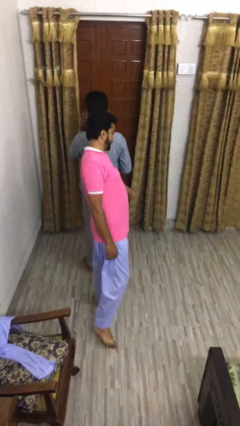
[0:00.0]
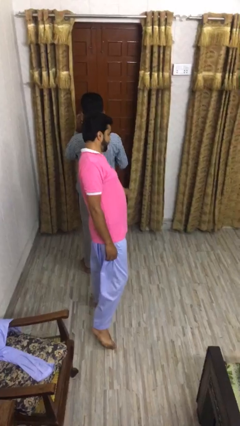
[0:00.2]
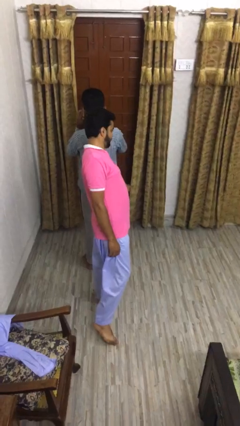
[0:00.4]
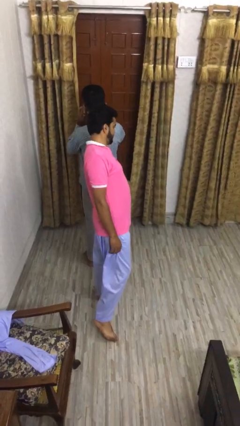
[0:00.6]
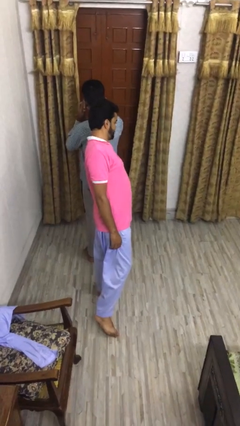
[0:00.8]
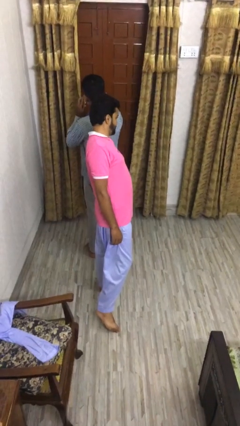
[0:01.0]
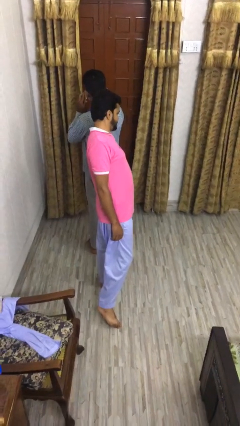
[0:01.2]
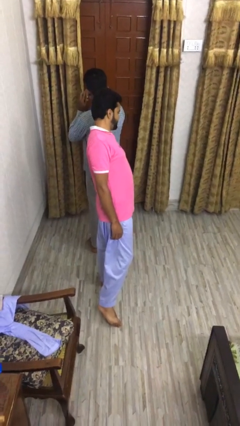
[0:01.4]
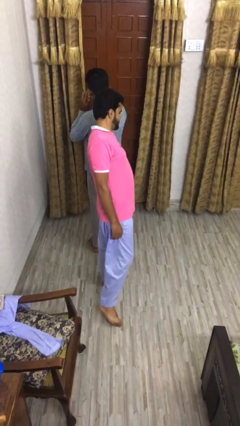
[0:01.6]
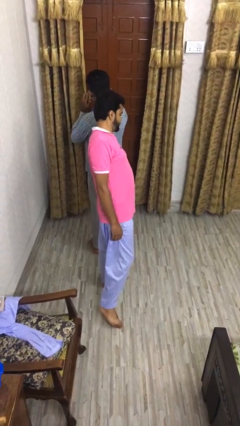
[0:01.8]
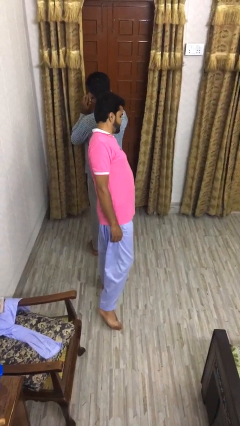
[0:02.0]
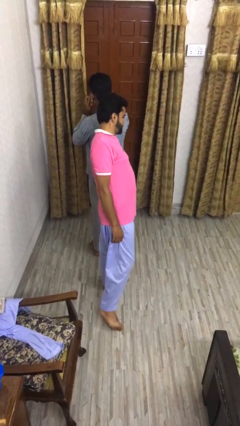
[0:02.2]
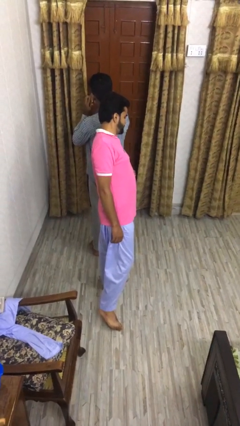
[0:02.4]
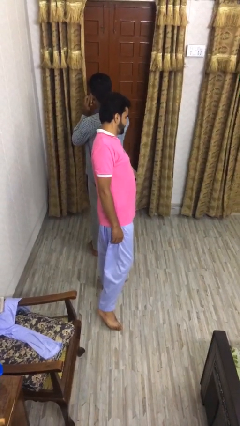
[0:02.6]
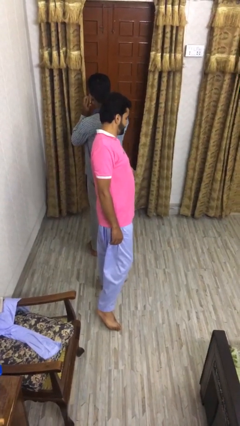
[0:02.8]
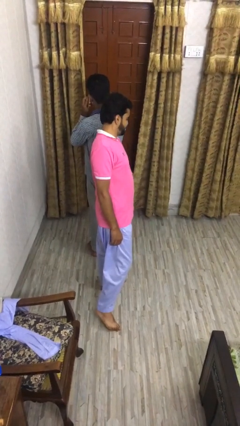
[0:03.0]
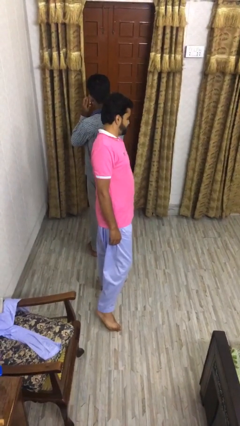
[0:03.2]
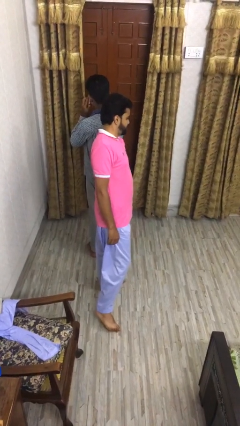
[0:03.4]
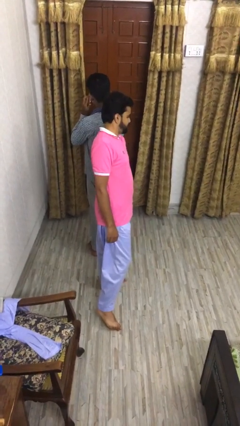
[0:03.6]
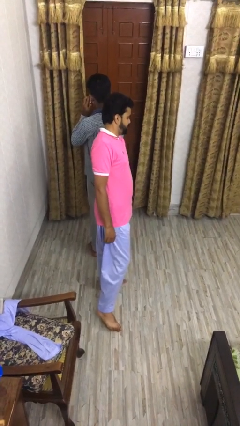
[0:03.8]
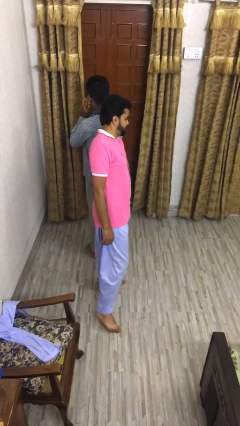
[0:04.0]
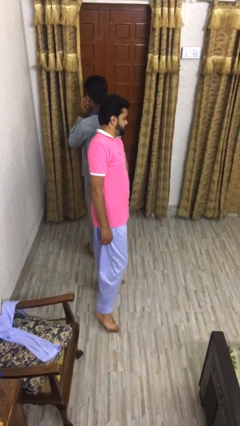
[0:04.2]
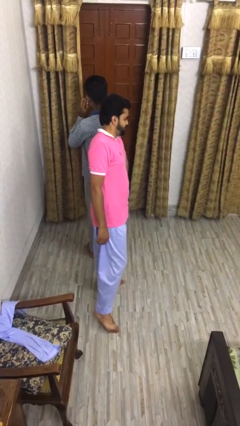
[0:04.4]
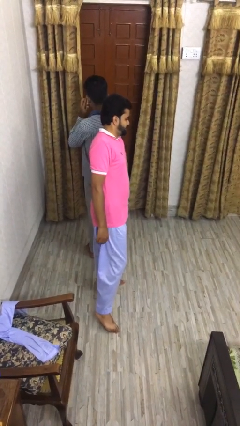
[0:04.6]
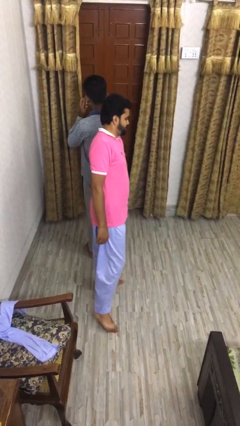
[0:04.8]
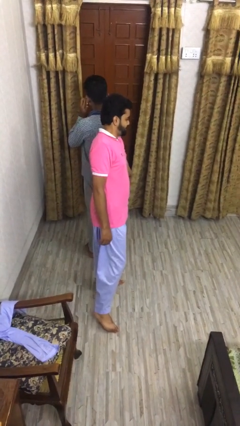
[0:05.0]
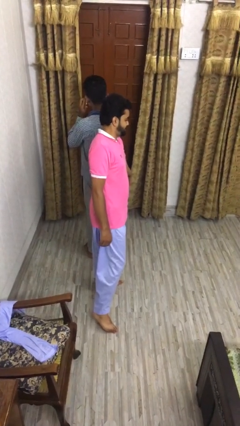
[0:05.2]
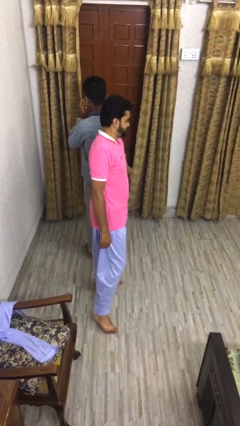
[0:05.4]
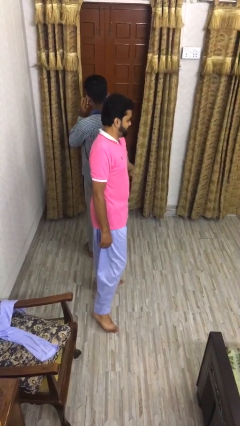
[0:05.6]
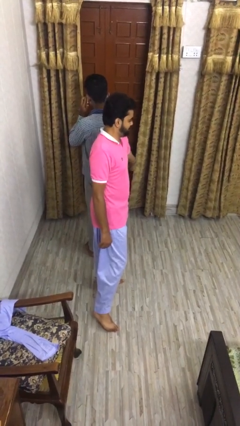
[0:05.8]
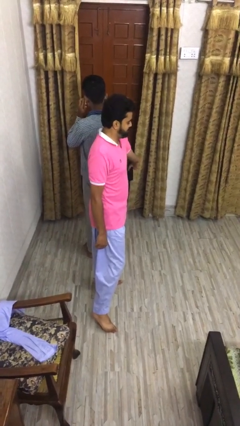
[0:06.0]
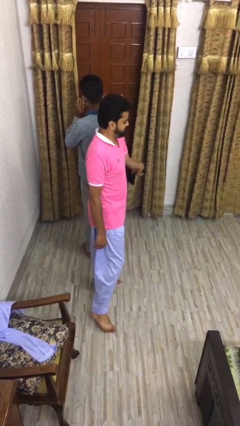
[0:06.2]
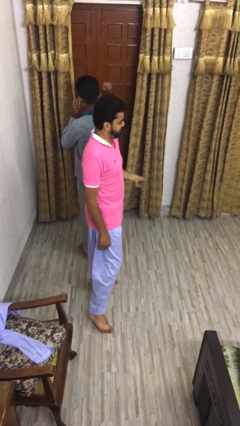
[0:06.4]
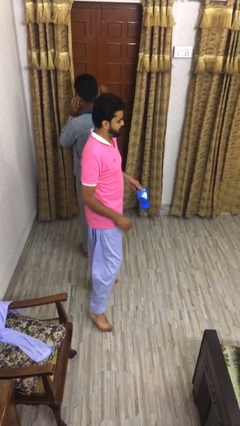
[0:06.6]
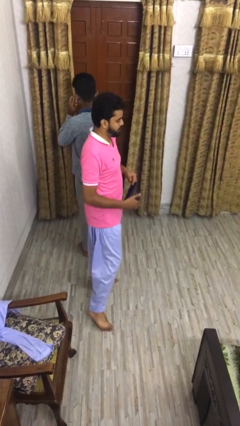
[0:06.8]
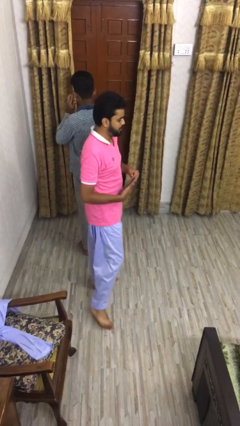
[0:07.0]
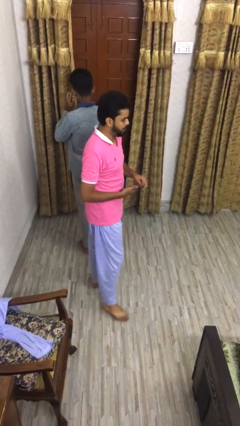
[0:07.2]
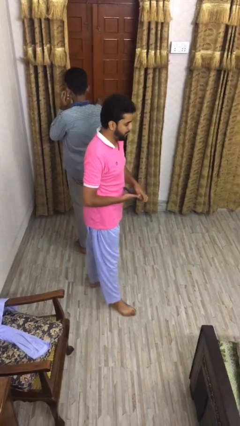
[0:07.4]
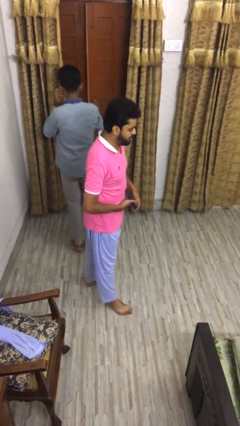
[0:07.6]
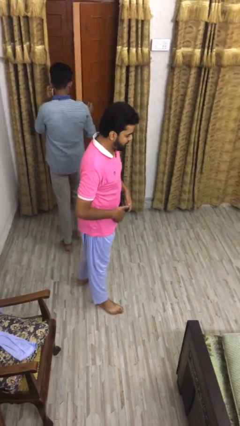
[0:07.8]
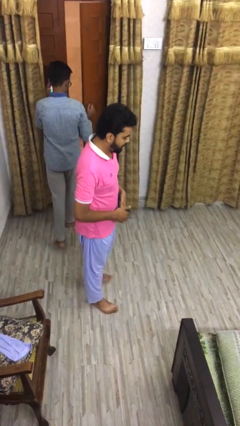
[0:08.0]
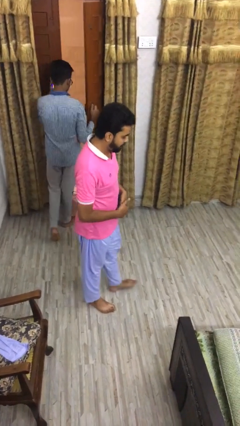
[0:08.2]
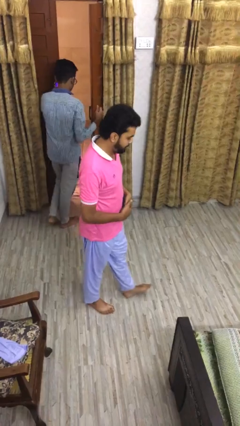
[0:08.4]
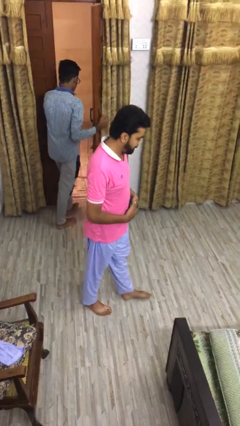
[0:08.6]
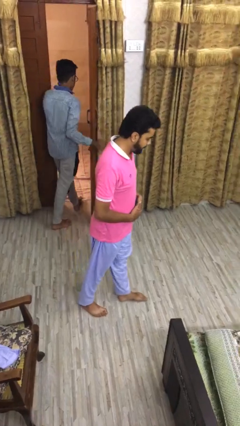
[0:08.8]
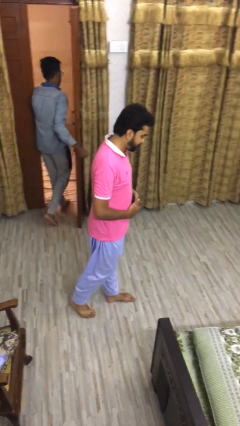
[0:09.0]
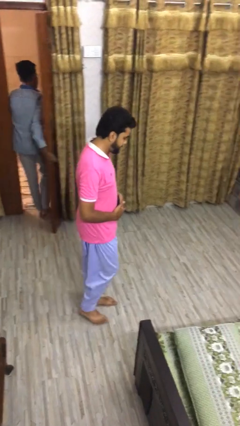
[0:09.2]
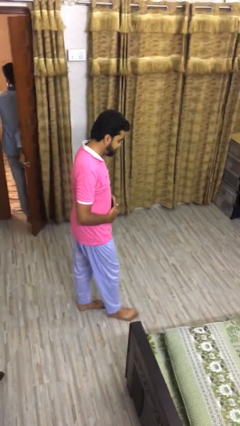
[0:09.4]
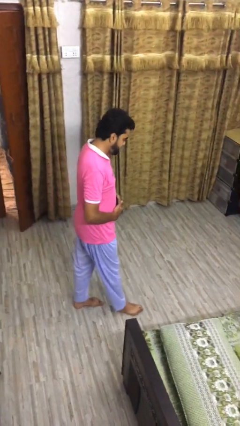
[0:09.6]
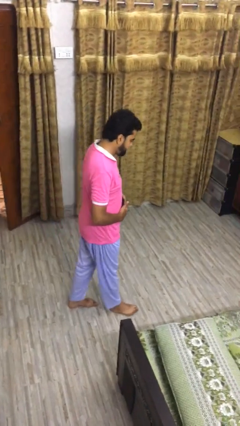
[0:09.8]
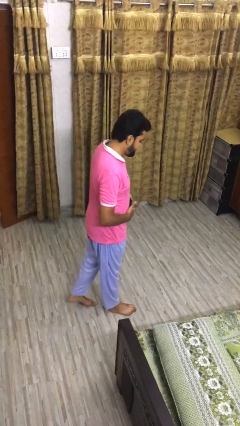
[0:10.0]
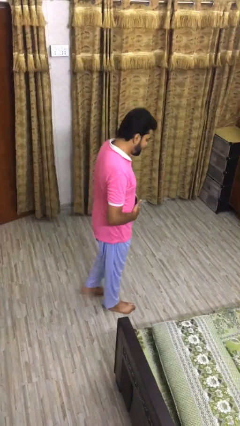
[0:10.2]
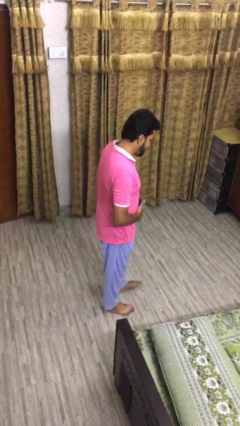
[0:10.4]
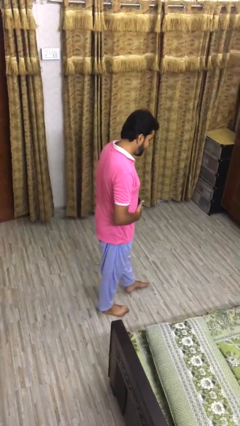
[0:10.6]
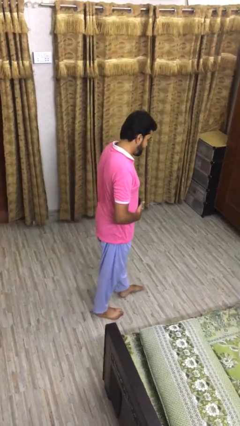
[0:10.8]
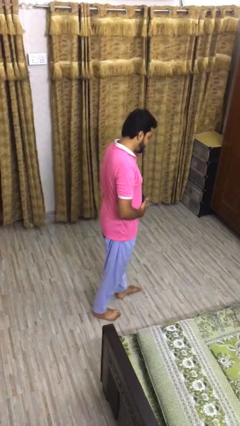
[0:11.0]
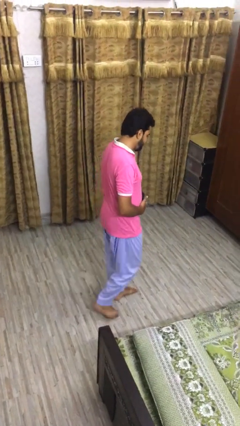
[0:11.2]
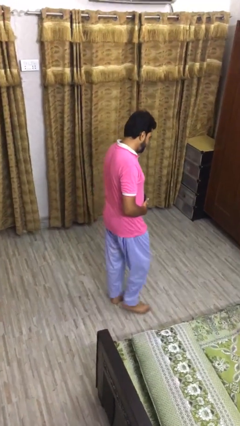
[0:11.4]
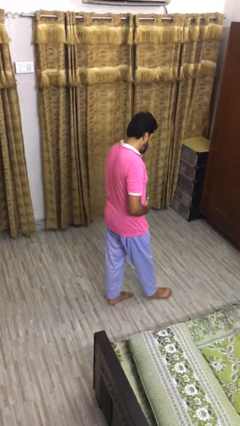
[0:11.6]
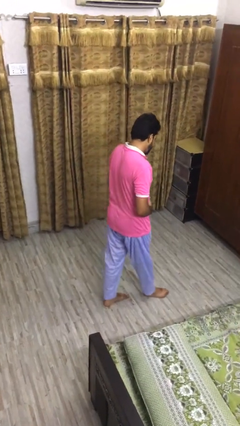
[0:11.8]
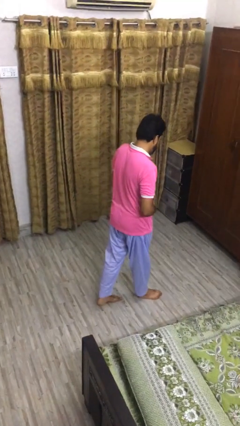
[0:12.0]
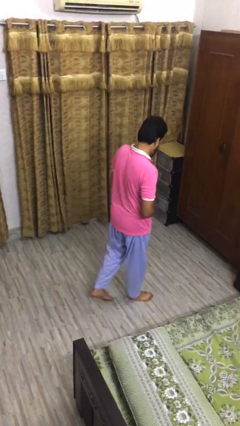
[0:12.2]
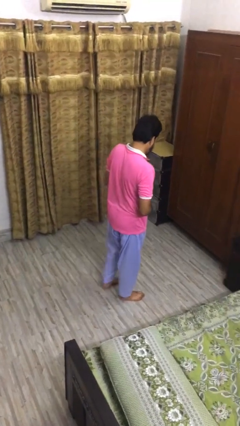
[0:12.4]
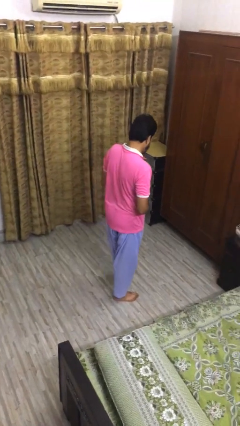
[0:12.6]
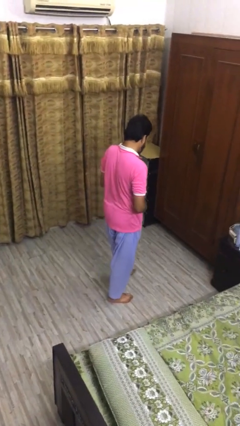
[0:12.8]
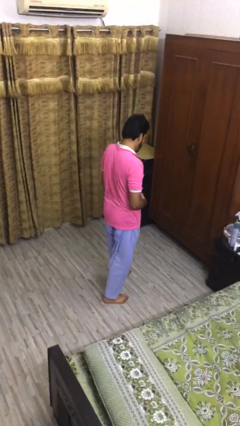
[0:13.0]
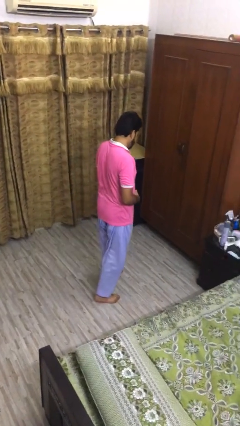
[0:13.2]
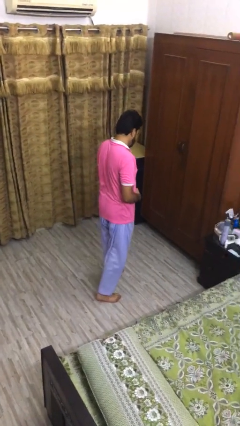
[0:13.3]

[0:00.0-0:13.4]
person steals object from person

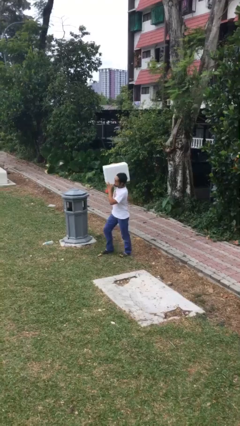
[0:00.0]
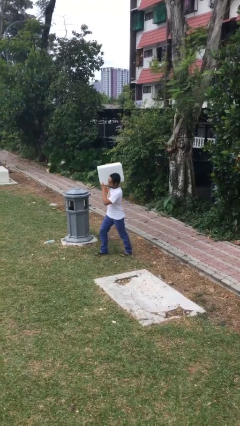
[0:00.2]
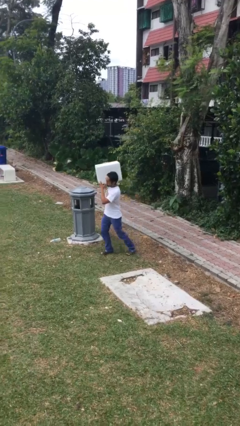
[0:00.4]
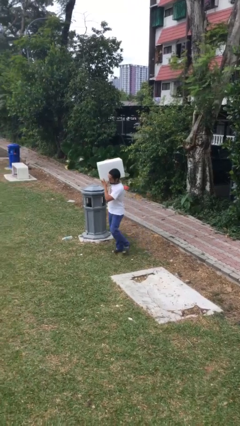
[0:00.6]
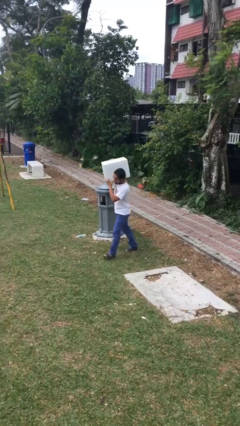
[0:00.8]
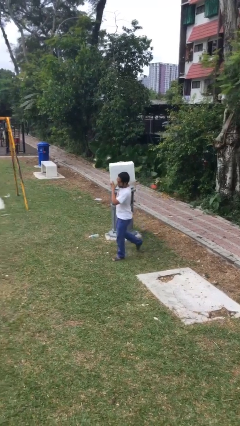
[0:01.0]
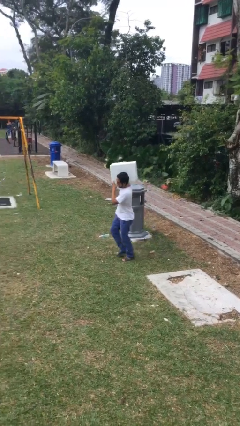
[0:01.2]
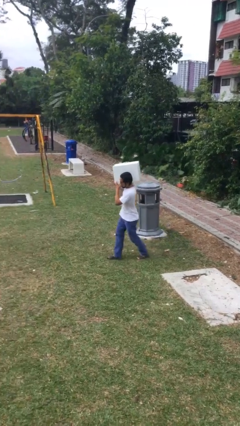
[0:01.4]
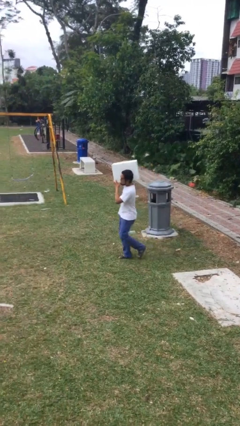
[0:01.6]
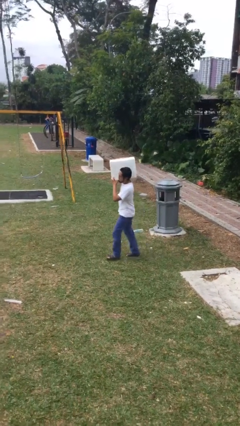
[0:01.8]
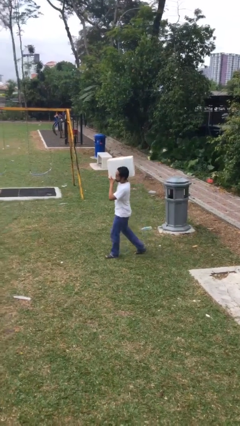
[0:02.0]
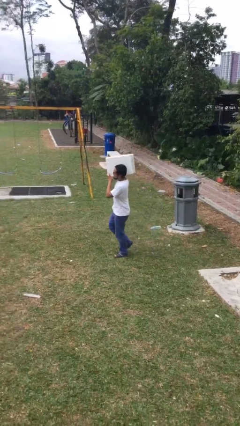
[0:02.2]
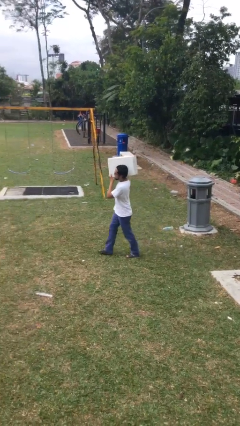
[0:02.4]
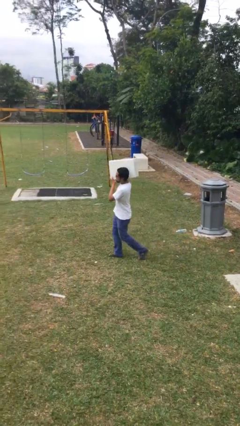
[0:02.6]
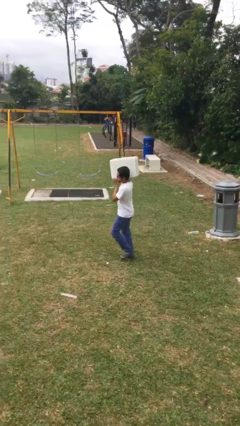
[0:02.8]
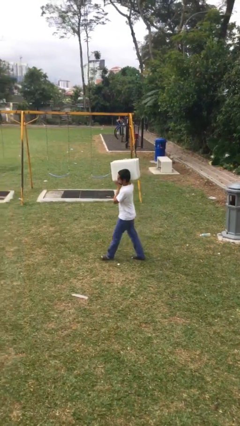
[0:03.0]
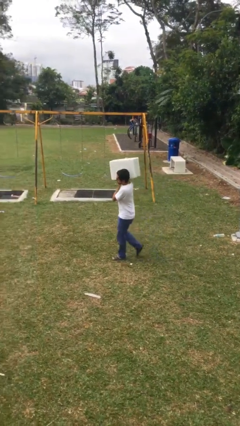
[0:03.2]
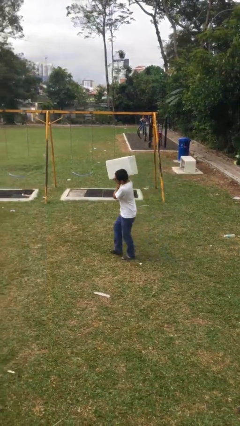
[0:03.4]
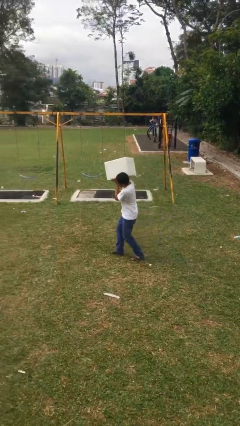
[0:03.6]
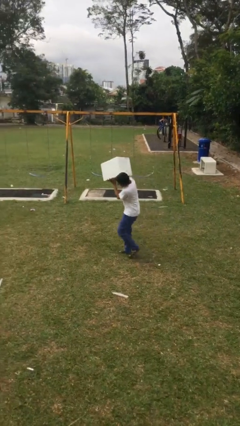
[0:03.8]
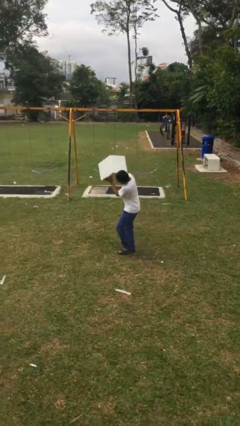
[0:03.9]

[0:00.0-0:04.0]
person carries heavy object

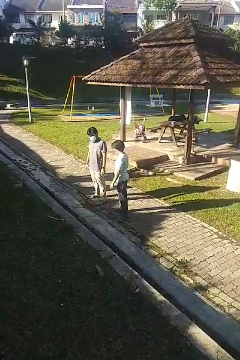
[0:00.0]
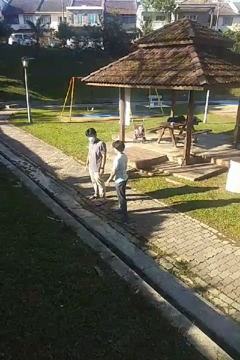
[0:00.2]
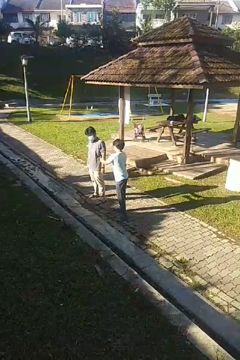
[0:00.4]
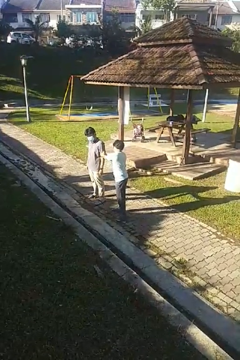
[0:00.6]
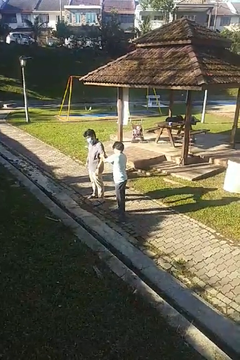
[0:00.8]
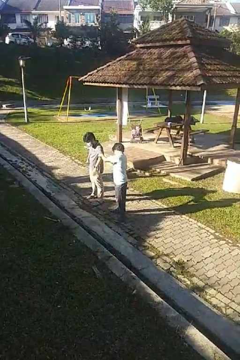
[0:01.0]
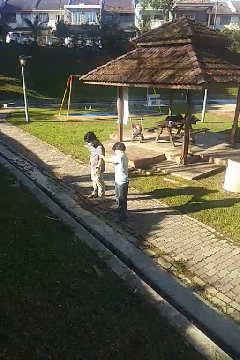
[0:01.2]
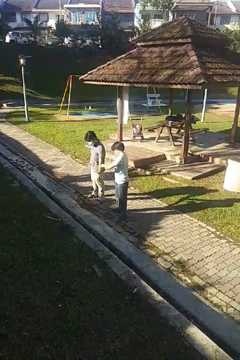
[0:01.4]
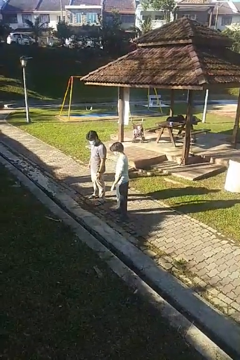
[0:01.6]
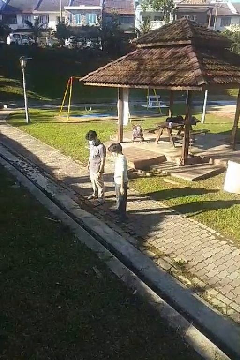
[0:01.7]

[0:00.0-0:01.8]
person grabs person by bicep
